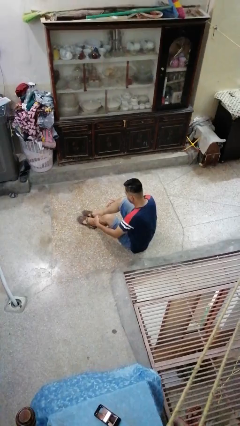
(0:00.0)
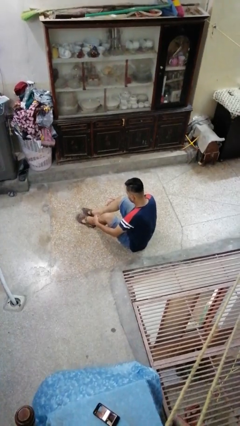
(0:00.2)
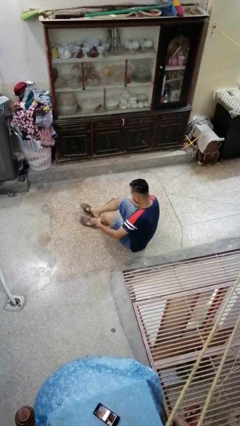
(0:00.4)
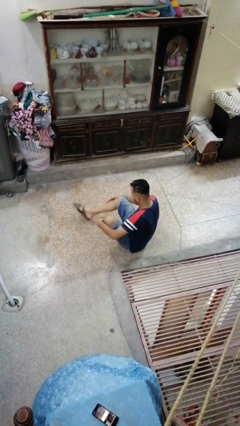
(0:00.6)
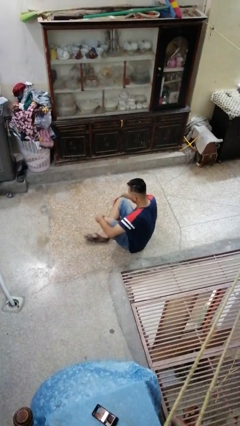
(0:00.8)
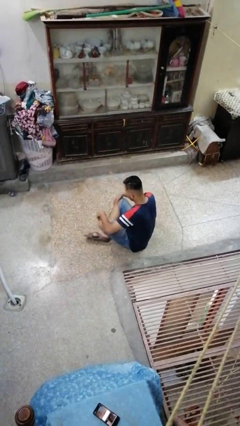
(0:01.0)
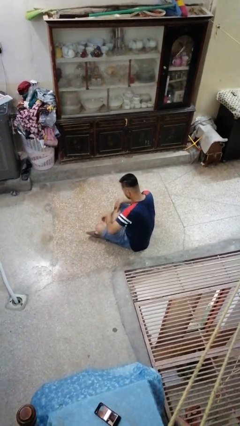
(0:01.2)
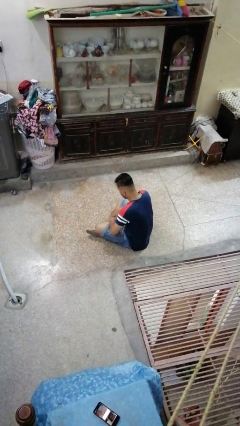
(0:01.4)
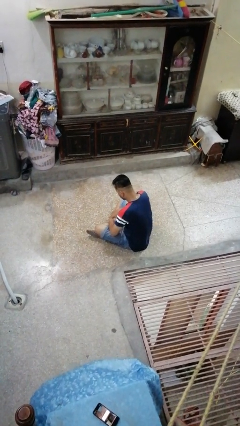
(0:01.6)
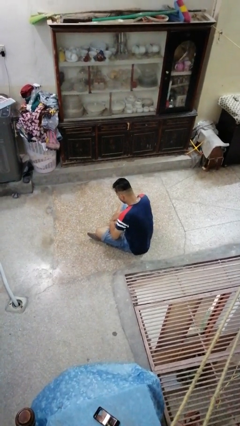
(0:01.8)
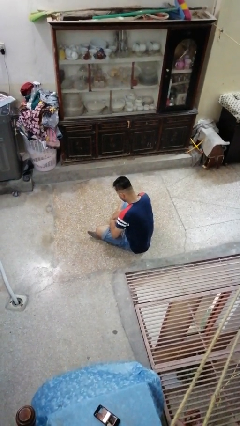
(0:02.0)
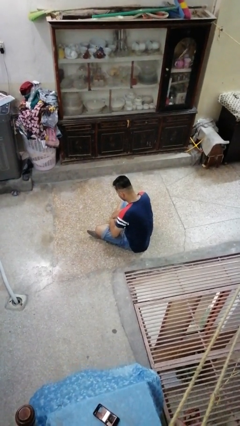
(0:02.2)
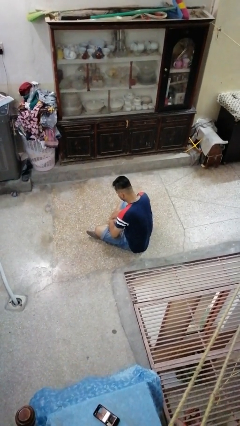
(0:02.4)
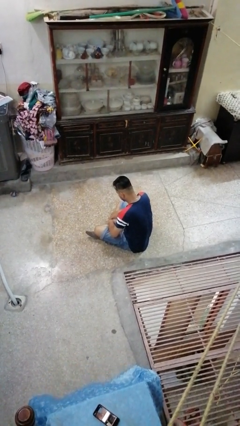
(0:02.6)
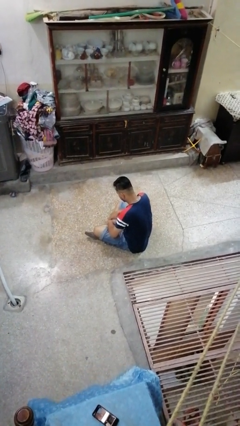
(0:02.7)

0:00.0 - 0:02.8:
person crosses legs

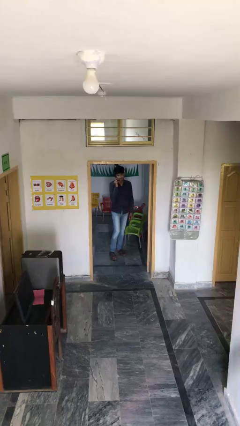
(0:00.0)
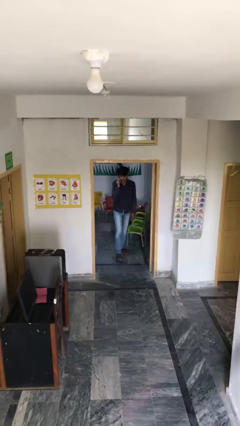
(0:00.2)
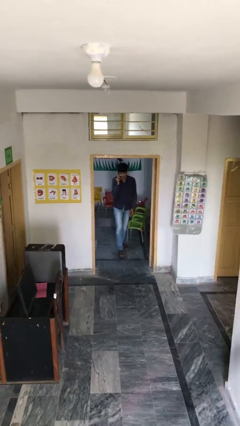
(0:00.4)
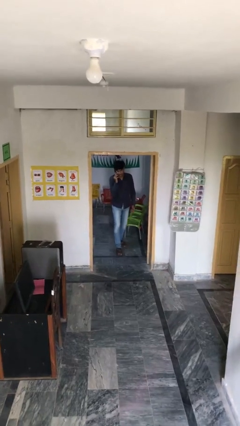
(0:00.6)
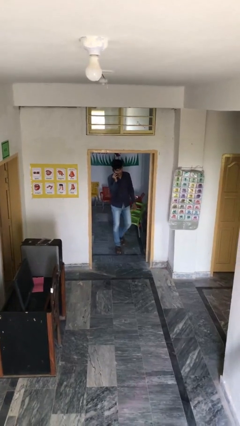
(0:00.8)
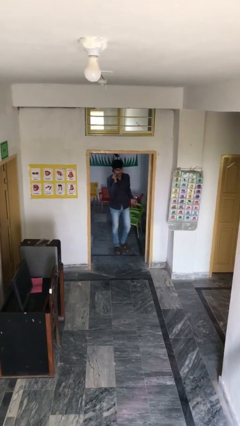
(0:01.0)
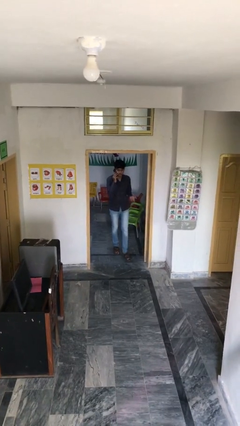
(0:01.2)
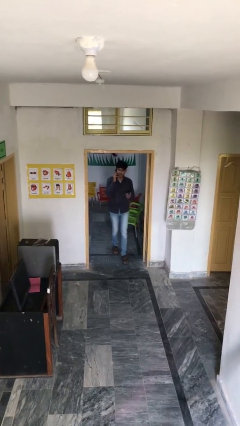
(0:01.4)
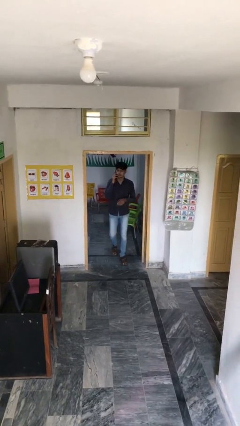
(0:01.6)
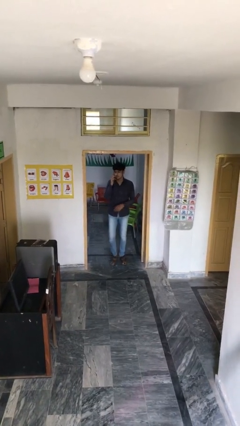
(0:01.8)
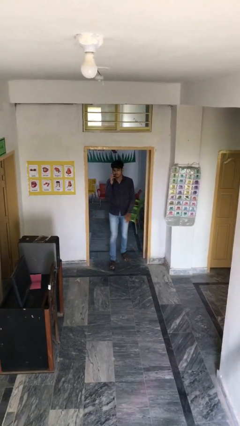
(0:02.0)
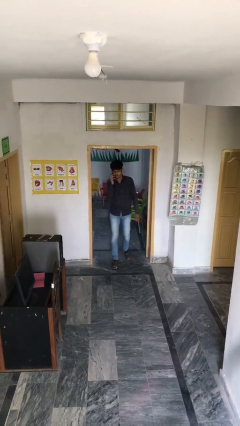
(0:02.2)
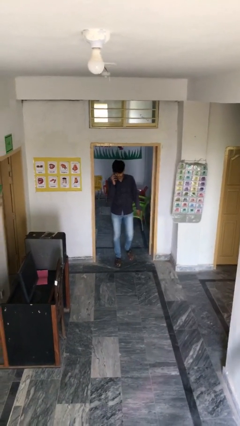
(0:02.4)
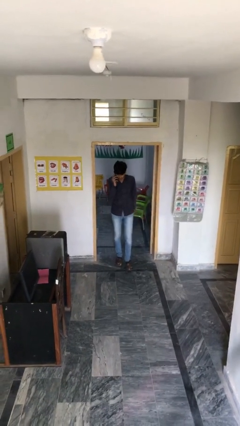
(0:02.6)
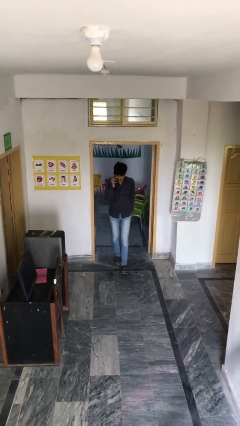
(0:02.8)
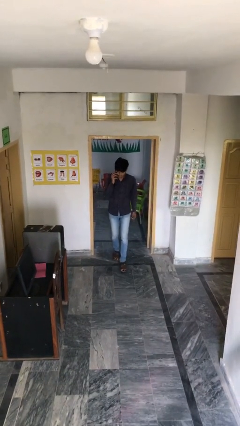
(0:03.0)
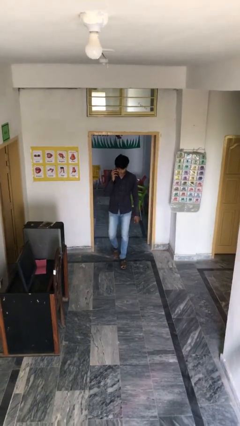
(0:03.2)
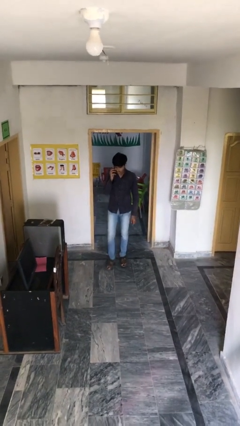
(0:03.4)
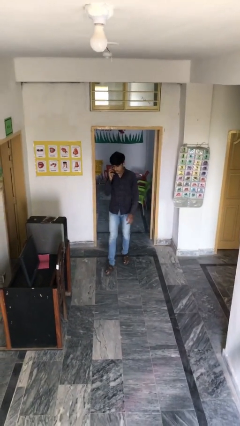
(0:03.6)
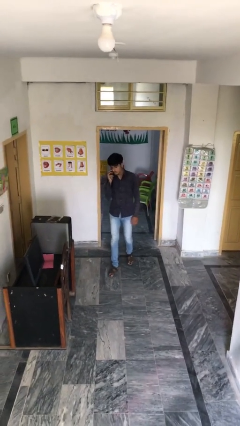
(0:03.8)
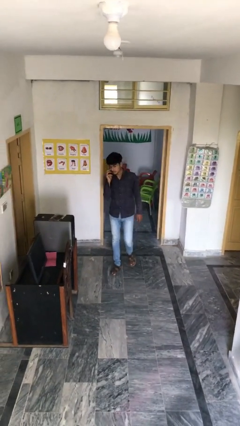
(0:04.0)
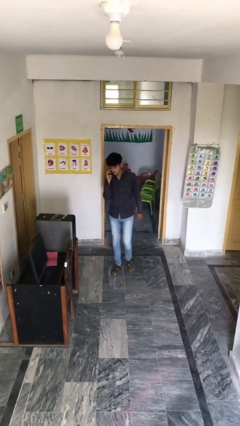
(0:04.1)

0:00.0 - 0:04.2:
person enters scene through structure

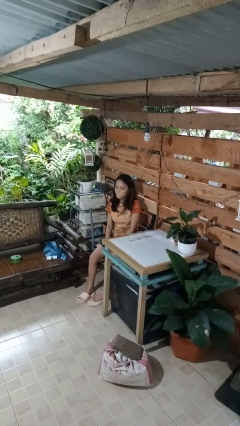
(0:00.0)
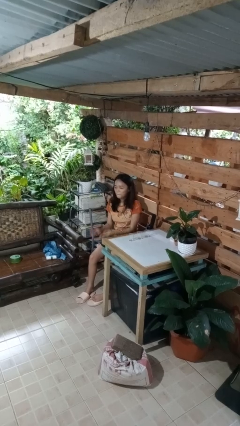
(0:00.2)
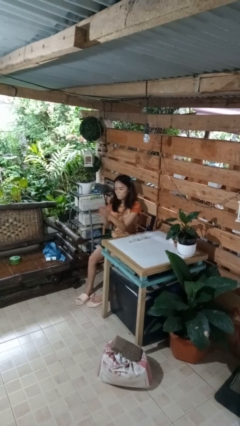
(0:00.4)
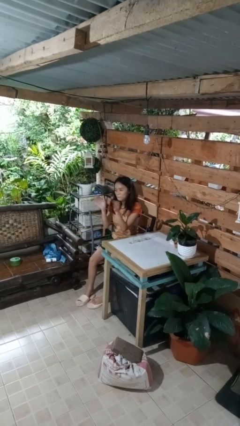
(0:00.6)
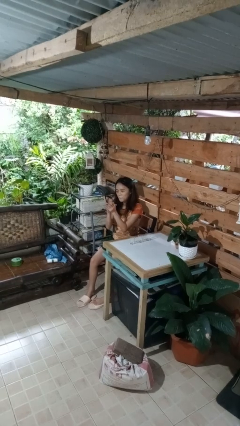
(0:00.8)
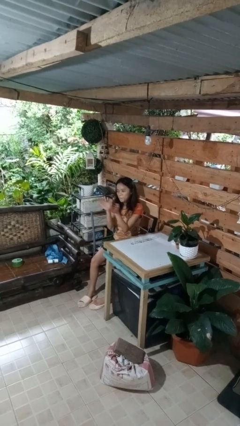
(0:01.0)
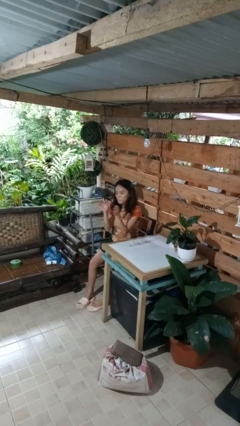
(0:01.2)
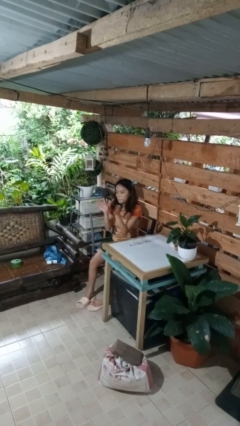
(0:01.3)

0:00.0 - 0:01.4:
person claps hands

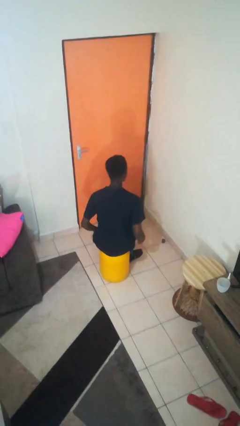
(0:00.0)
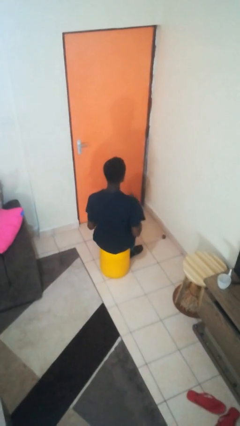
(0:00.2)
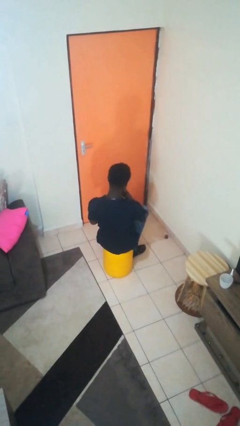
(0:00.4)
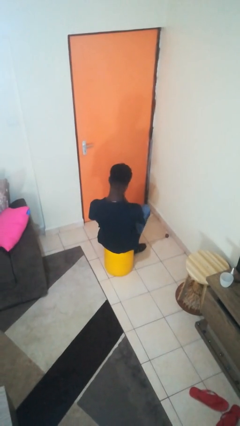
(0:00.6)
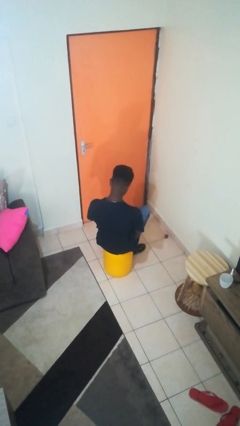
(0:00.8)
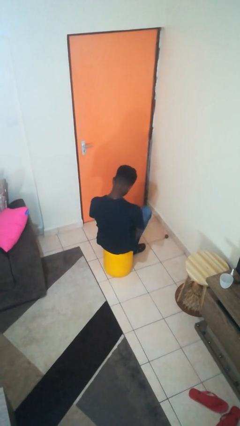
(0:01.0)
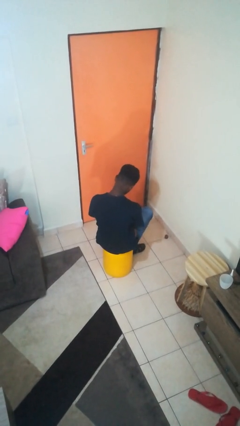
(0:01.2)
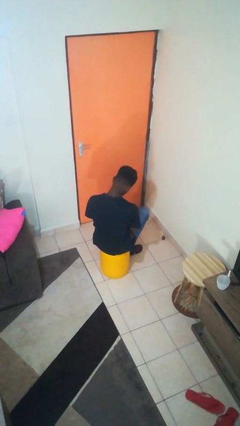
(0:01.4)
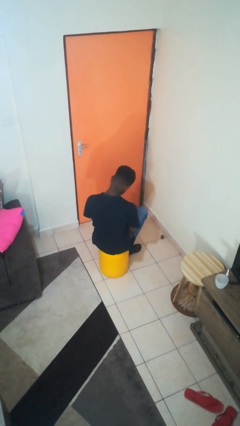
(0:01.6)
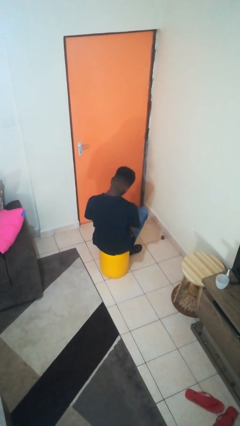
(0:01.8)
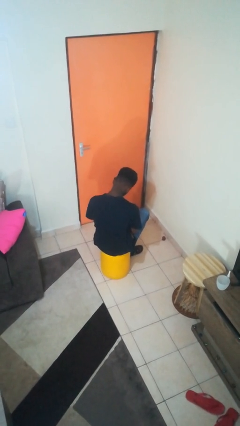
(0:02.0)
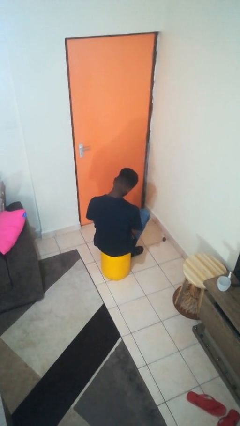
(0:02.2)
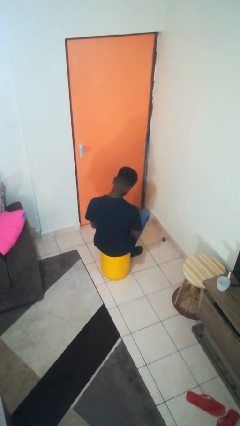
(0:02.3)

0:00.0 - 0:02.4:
person strokes chin

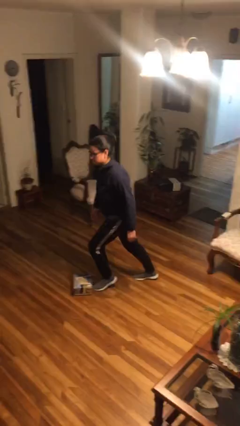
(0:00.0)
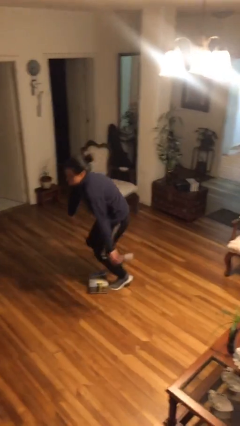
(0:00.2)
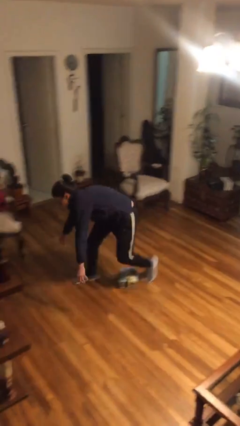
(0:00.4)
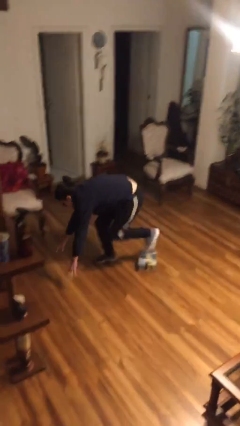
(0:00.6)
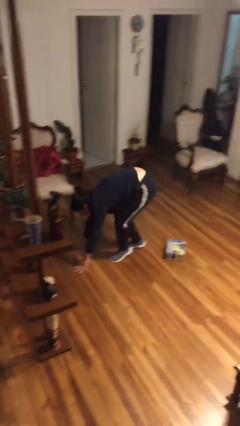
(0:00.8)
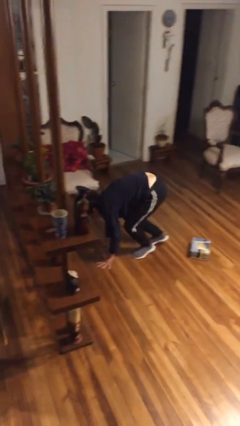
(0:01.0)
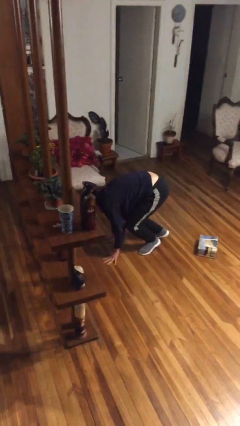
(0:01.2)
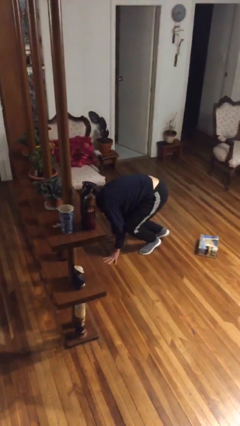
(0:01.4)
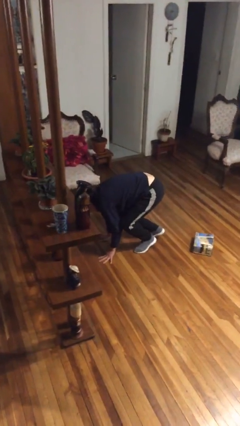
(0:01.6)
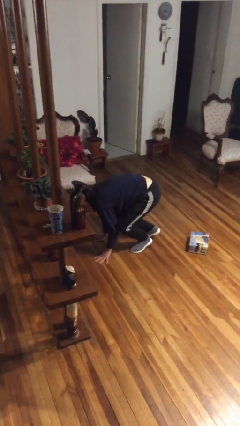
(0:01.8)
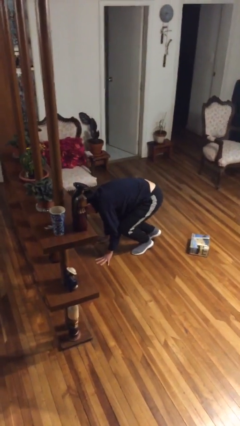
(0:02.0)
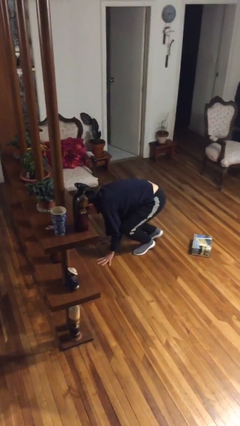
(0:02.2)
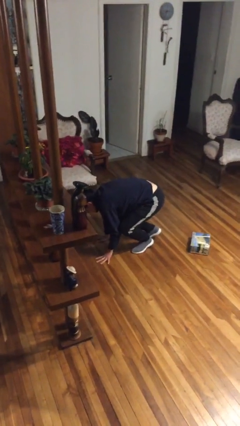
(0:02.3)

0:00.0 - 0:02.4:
person trips on object on floor

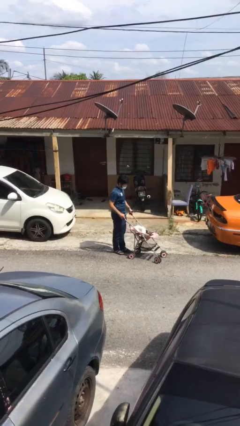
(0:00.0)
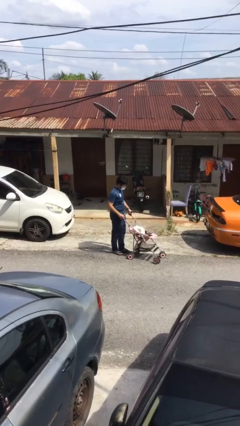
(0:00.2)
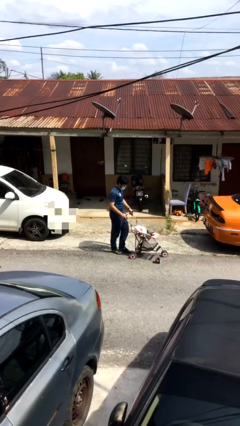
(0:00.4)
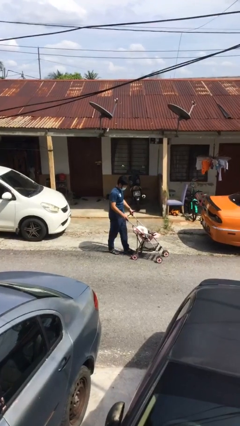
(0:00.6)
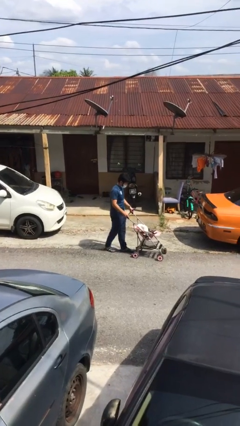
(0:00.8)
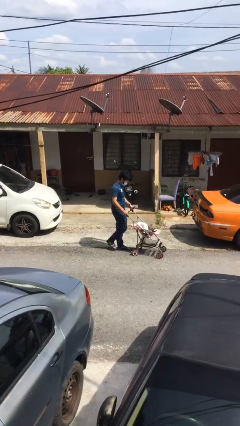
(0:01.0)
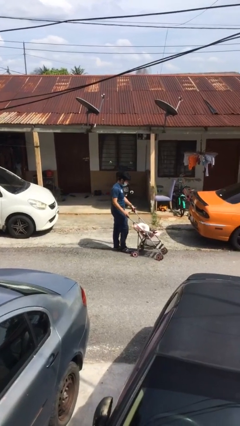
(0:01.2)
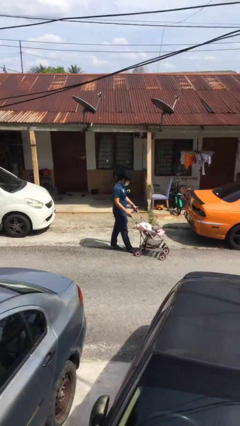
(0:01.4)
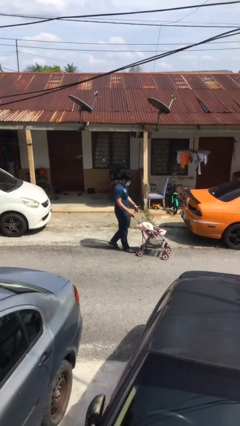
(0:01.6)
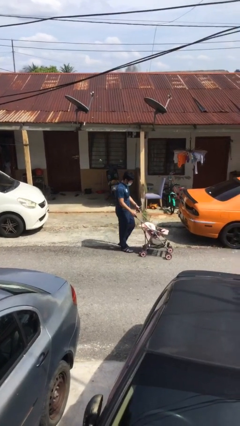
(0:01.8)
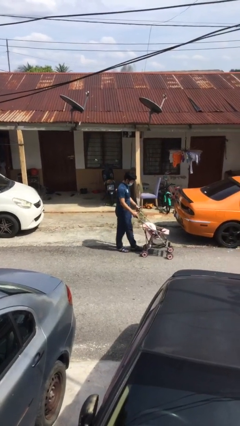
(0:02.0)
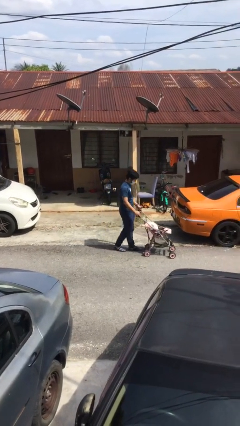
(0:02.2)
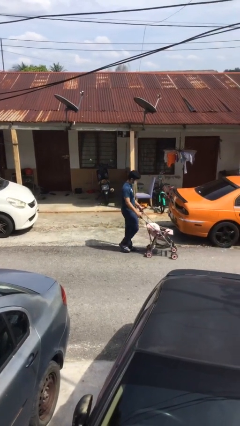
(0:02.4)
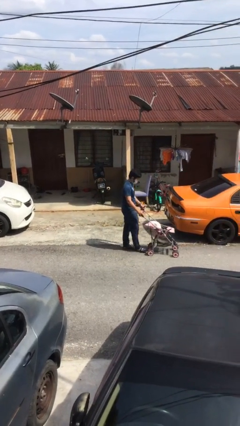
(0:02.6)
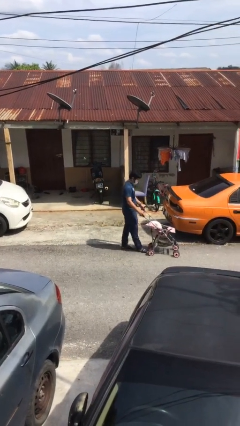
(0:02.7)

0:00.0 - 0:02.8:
person pushes wheeled cart

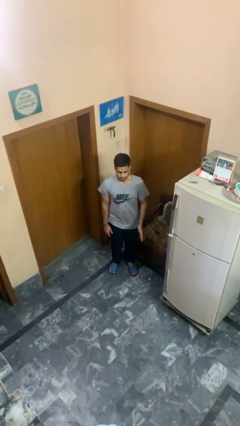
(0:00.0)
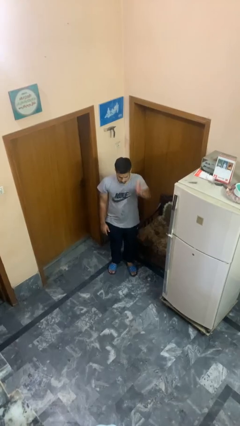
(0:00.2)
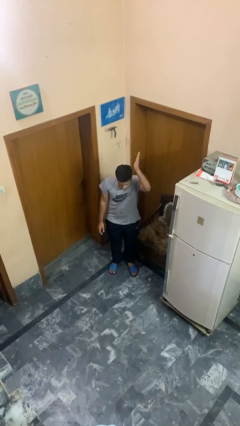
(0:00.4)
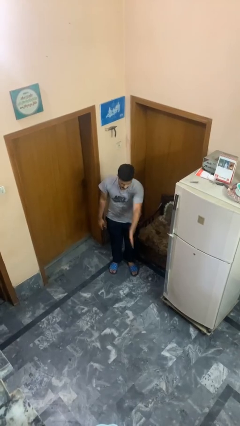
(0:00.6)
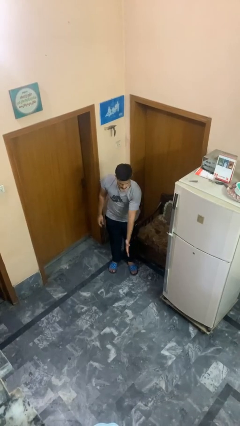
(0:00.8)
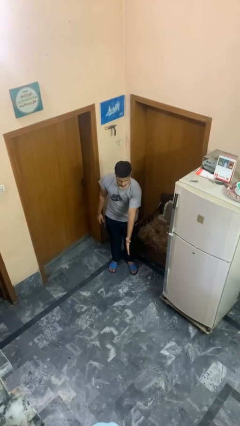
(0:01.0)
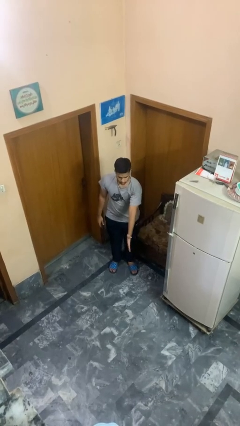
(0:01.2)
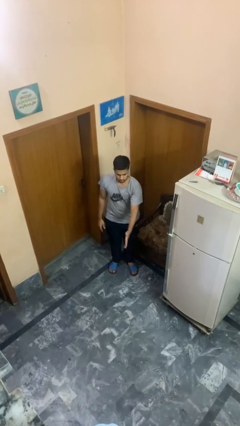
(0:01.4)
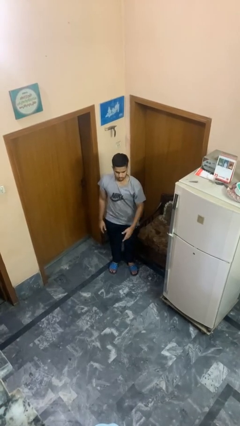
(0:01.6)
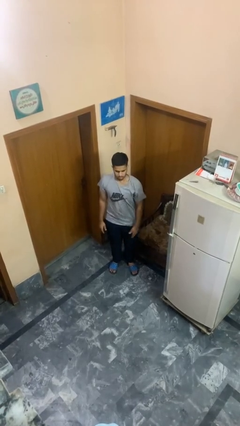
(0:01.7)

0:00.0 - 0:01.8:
person karate chop
